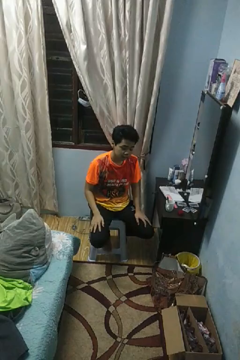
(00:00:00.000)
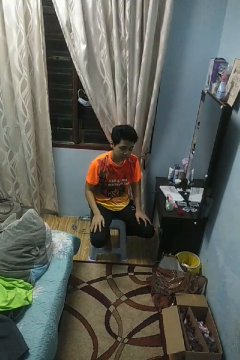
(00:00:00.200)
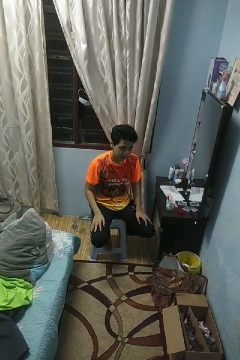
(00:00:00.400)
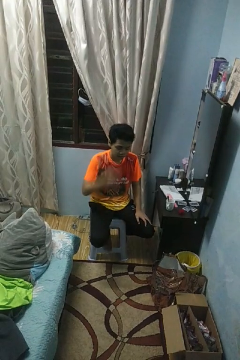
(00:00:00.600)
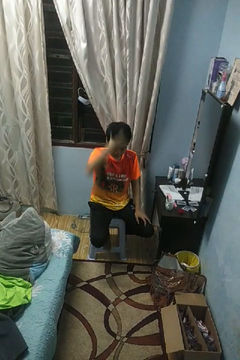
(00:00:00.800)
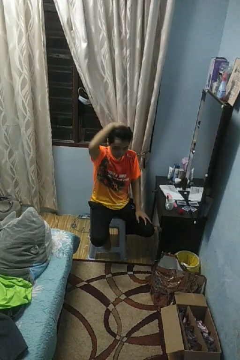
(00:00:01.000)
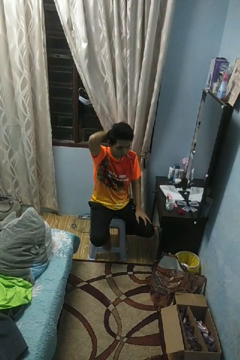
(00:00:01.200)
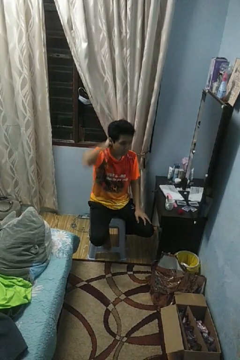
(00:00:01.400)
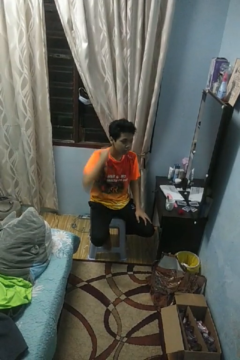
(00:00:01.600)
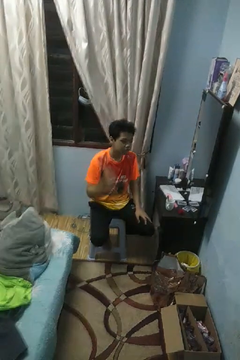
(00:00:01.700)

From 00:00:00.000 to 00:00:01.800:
person strokes hair

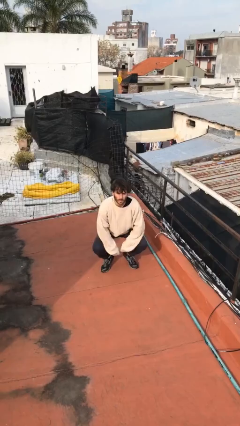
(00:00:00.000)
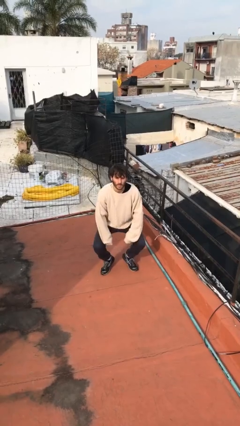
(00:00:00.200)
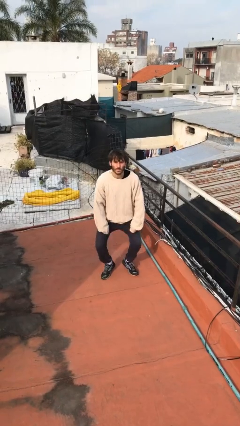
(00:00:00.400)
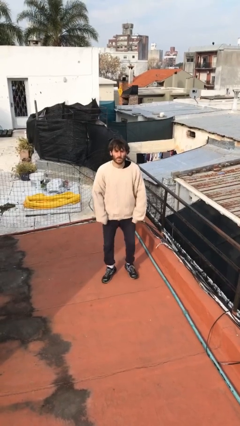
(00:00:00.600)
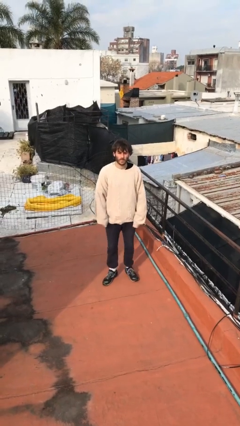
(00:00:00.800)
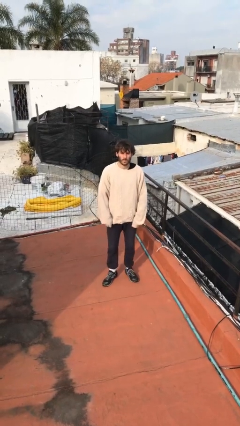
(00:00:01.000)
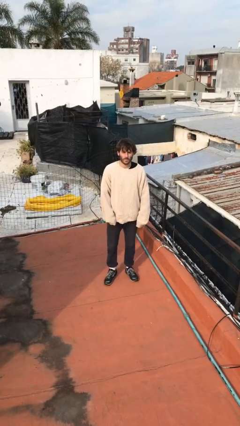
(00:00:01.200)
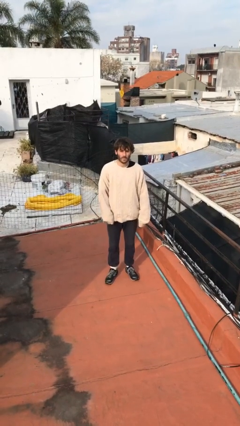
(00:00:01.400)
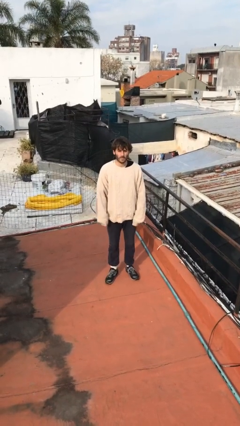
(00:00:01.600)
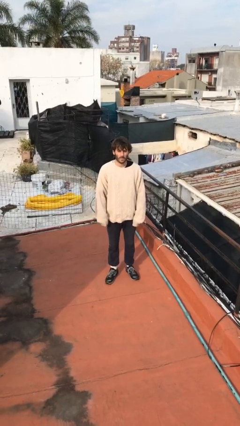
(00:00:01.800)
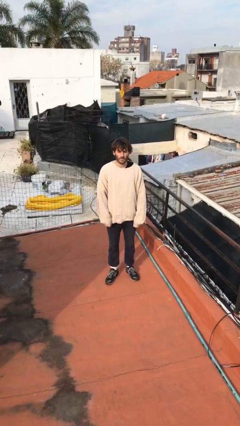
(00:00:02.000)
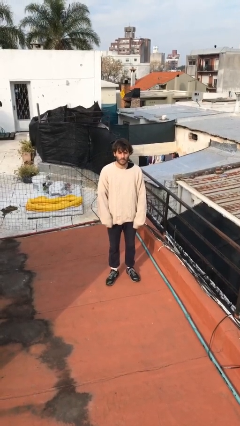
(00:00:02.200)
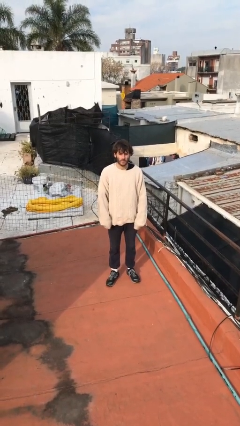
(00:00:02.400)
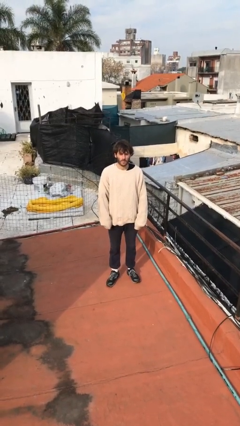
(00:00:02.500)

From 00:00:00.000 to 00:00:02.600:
person stands up

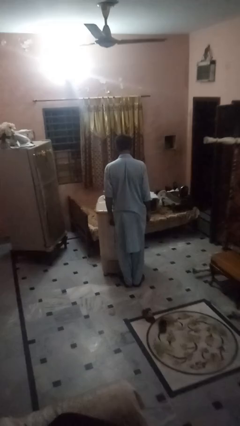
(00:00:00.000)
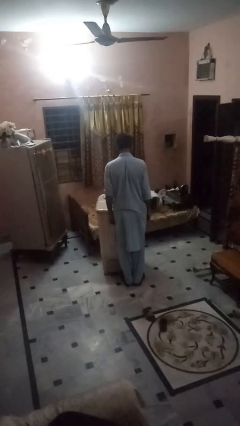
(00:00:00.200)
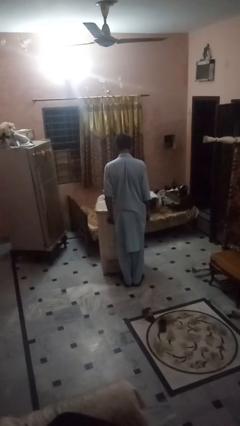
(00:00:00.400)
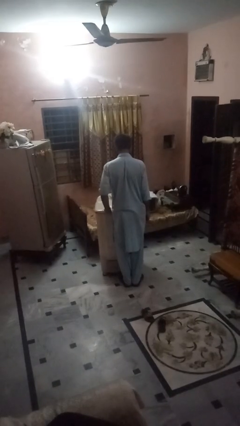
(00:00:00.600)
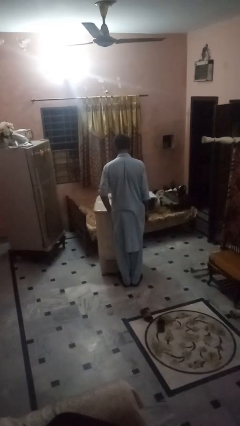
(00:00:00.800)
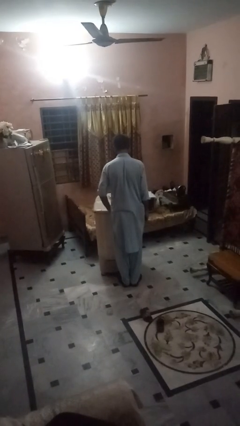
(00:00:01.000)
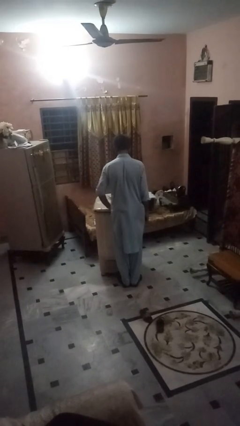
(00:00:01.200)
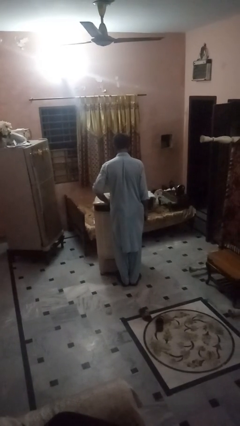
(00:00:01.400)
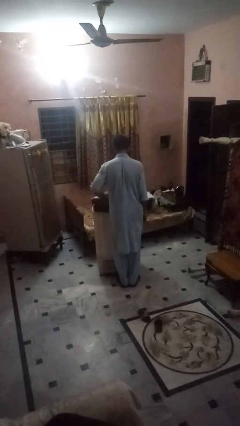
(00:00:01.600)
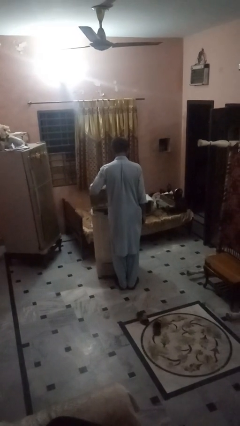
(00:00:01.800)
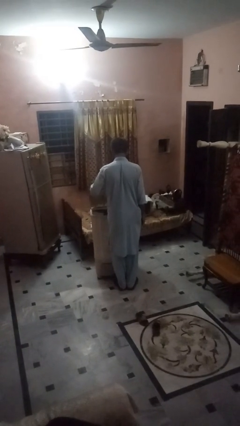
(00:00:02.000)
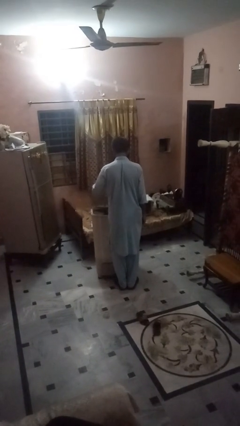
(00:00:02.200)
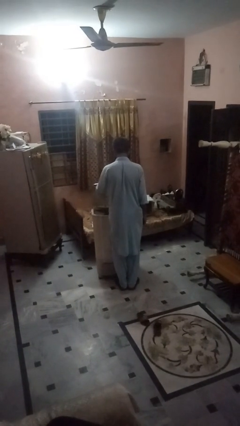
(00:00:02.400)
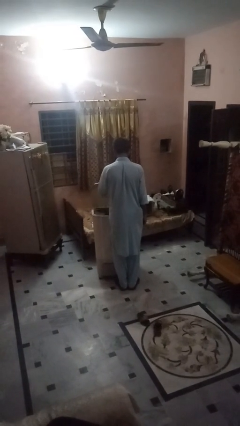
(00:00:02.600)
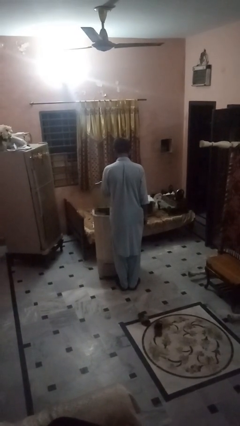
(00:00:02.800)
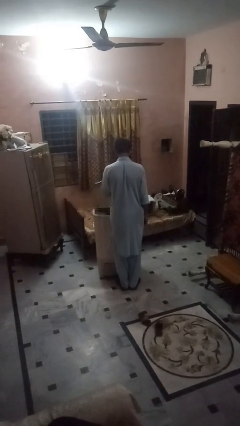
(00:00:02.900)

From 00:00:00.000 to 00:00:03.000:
person opens clothes washer

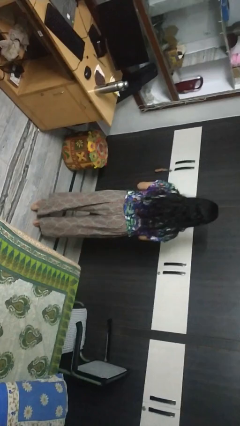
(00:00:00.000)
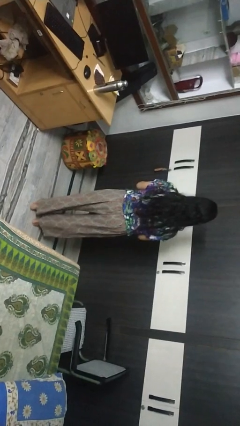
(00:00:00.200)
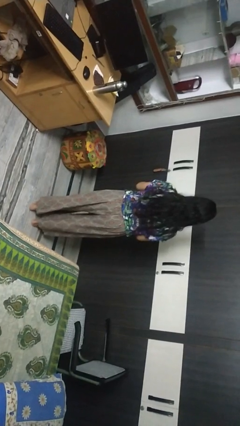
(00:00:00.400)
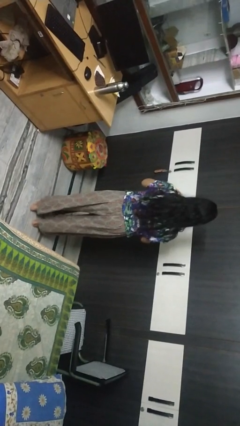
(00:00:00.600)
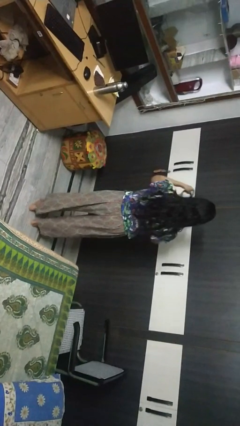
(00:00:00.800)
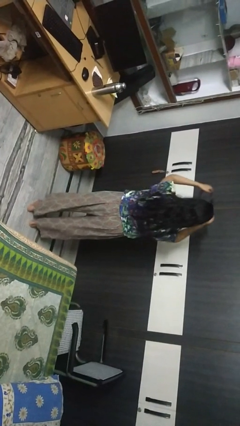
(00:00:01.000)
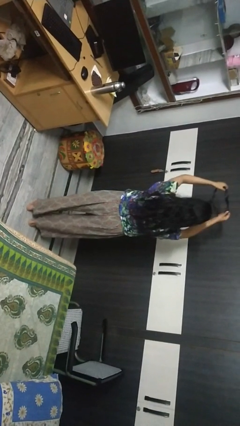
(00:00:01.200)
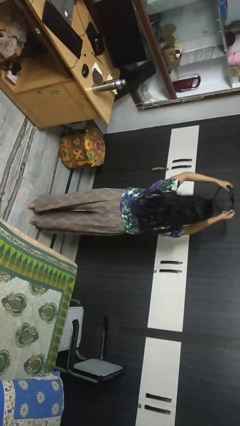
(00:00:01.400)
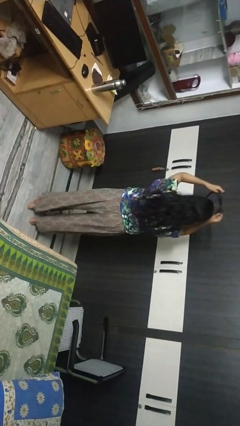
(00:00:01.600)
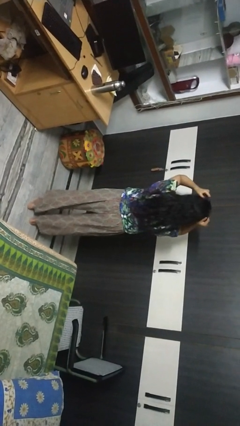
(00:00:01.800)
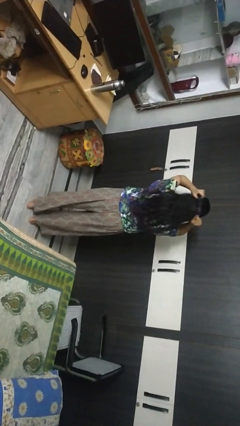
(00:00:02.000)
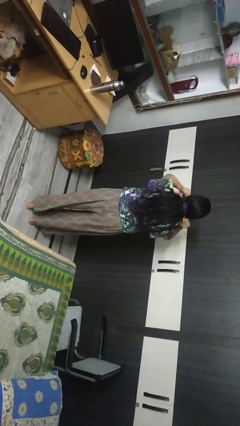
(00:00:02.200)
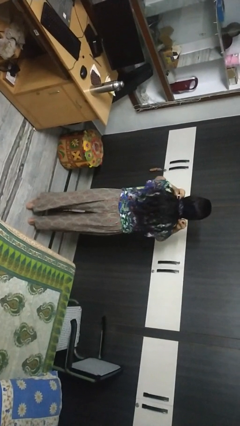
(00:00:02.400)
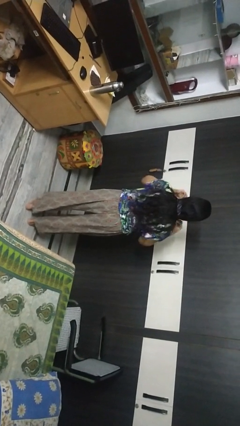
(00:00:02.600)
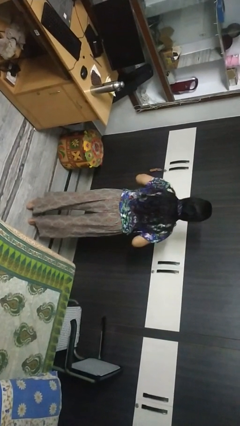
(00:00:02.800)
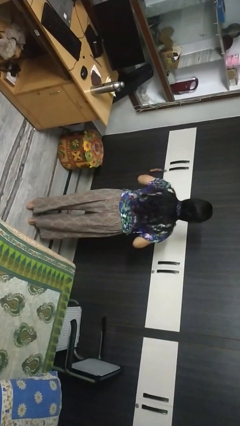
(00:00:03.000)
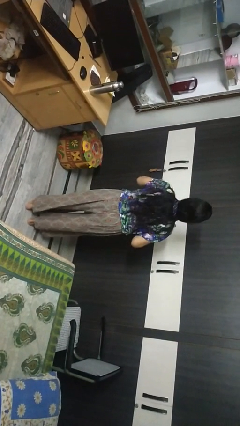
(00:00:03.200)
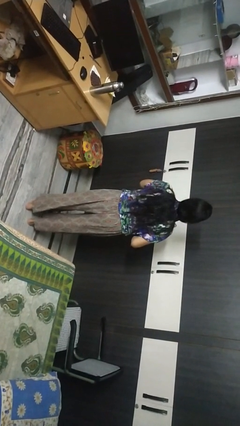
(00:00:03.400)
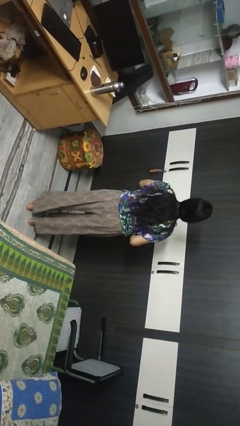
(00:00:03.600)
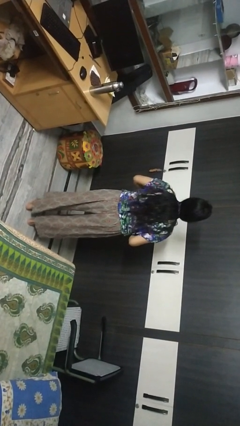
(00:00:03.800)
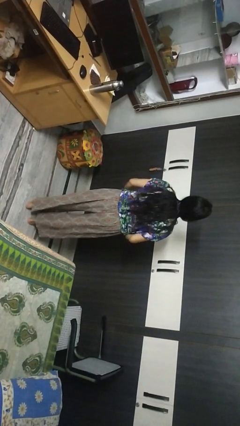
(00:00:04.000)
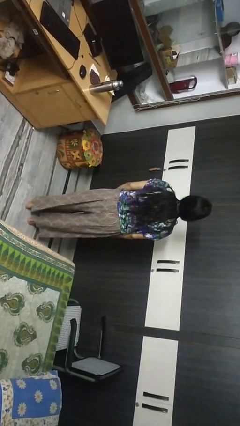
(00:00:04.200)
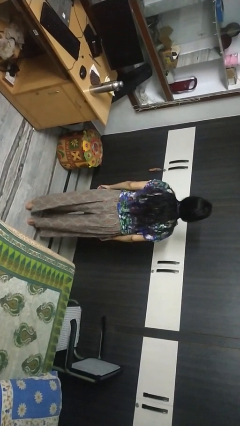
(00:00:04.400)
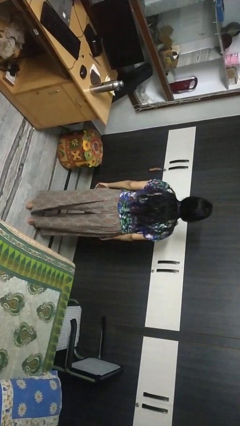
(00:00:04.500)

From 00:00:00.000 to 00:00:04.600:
person puts on necktie

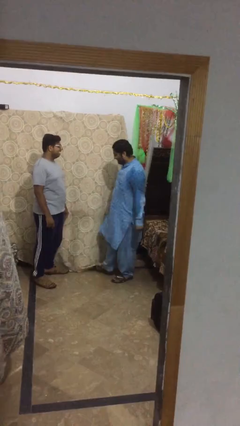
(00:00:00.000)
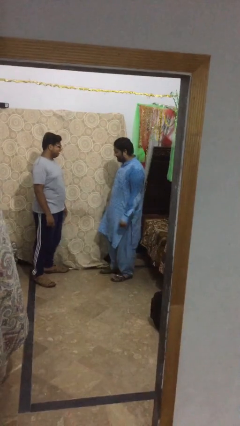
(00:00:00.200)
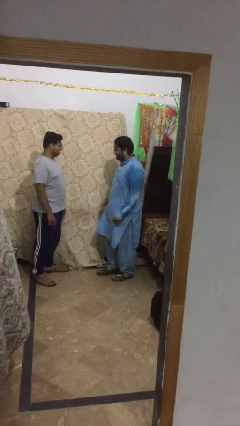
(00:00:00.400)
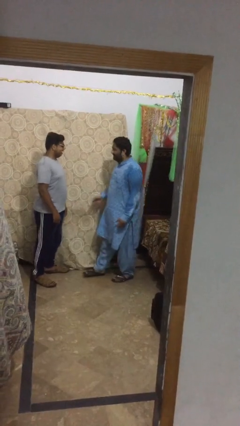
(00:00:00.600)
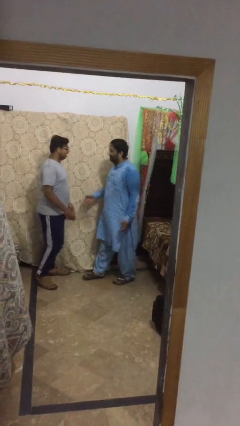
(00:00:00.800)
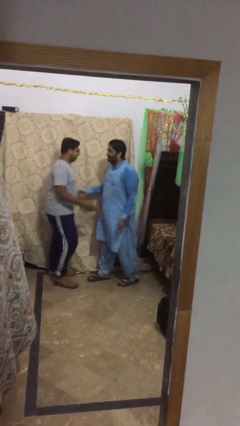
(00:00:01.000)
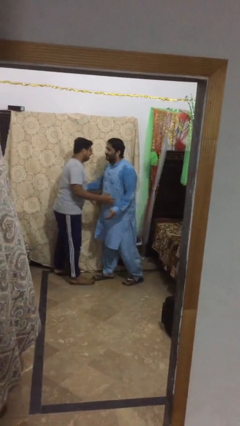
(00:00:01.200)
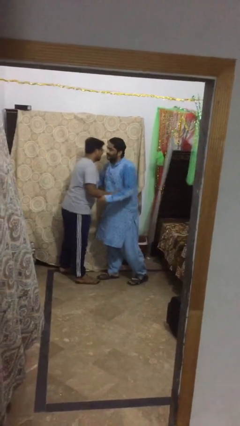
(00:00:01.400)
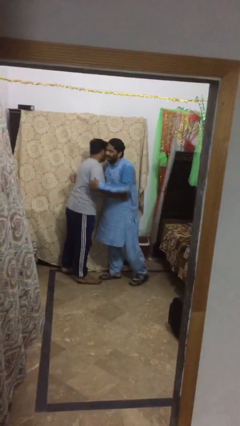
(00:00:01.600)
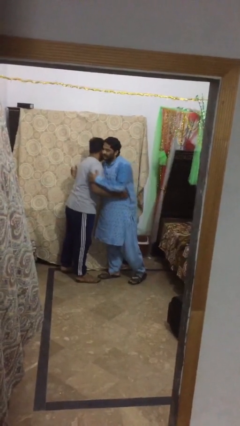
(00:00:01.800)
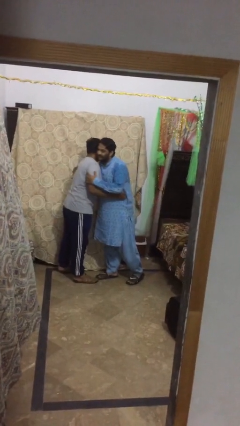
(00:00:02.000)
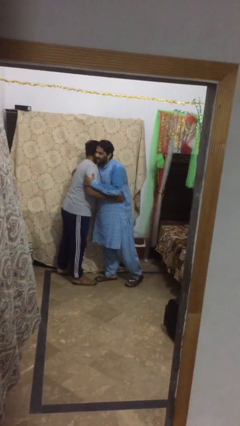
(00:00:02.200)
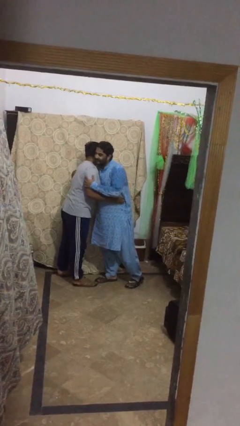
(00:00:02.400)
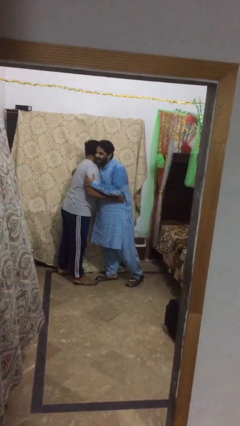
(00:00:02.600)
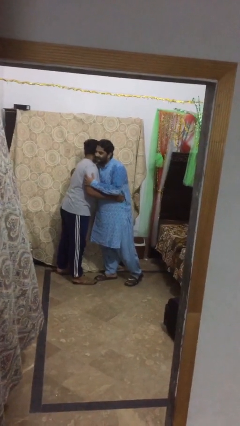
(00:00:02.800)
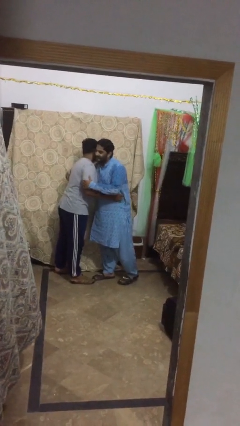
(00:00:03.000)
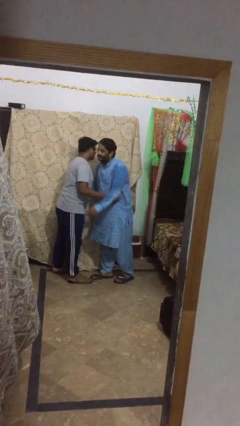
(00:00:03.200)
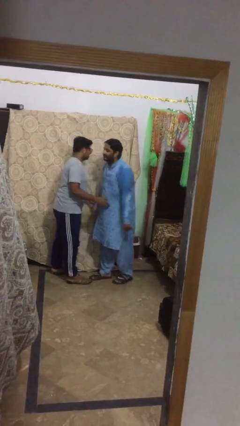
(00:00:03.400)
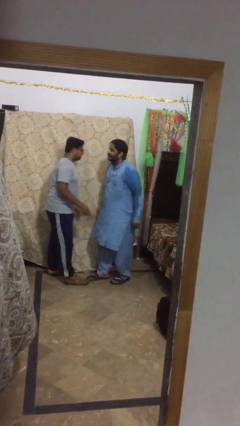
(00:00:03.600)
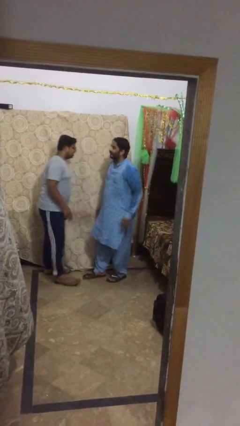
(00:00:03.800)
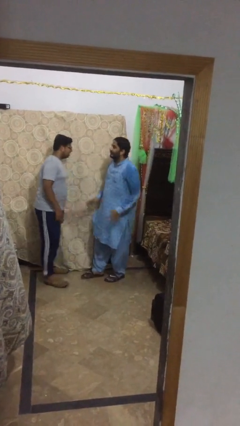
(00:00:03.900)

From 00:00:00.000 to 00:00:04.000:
person embraces person

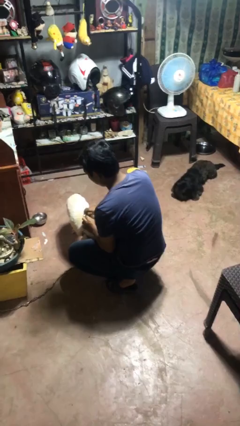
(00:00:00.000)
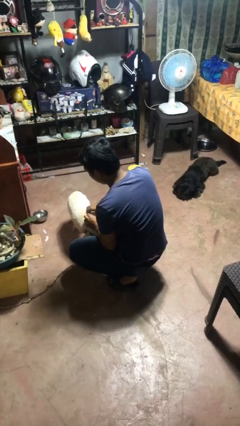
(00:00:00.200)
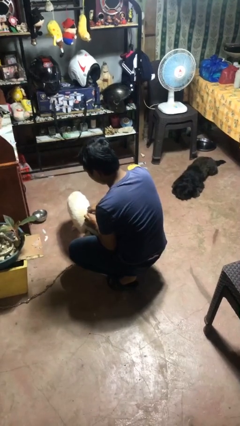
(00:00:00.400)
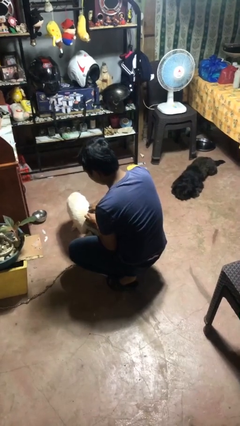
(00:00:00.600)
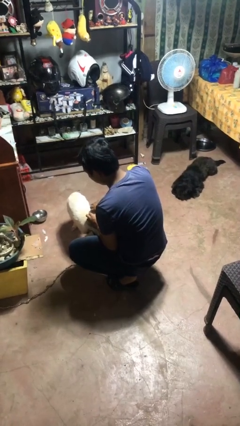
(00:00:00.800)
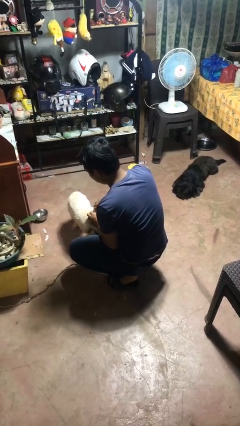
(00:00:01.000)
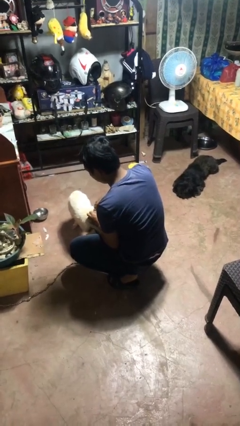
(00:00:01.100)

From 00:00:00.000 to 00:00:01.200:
person attaches leash to dog
